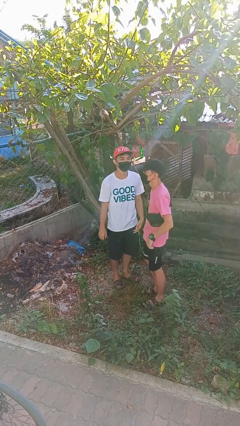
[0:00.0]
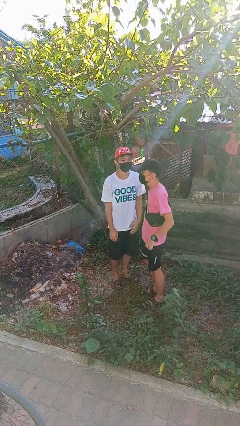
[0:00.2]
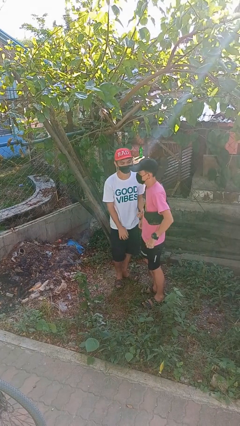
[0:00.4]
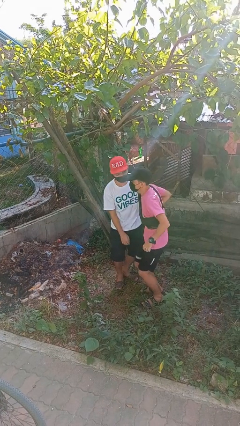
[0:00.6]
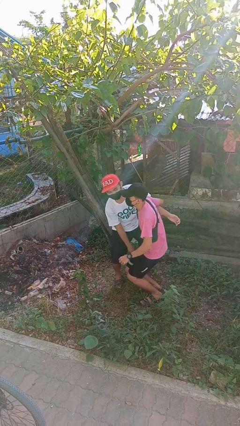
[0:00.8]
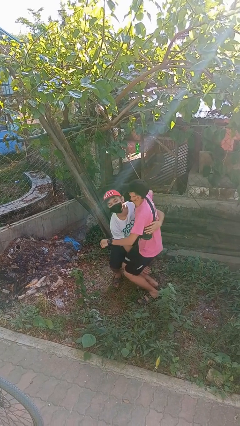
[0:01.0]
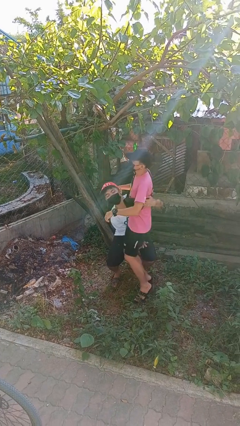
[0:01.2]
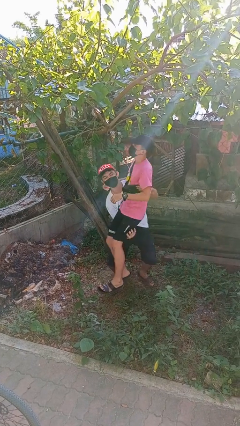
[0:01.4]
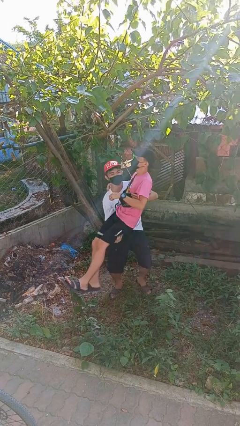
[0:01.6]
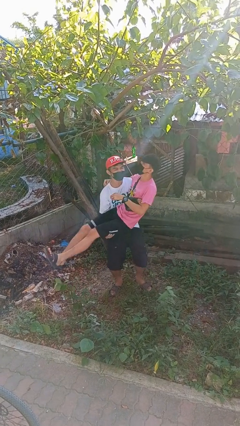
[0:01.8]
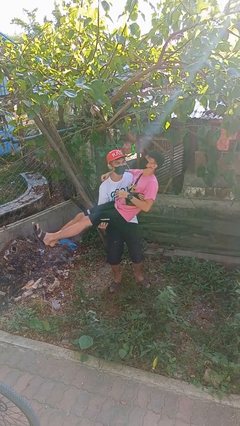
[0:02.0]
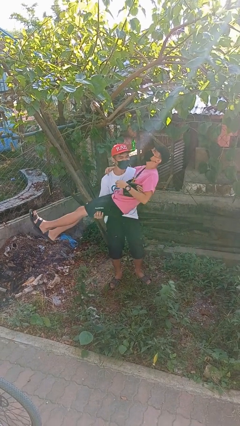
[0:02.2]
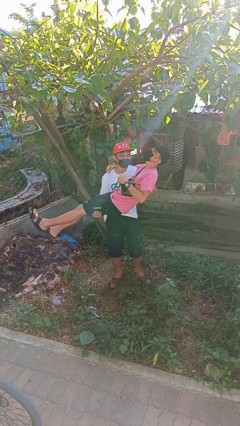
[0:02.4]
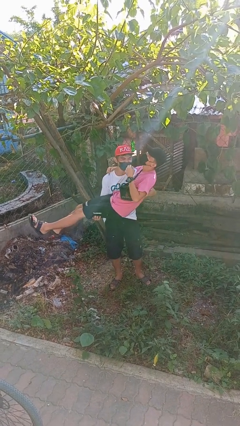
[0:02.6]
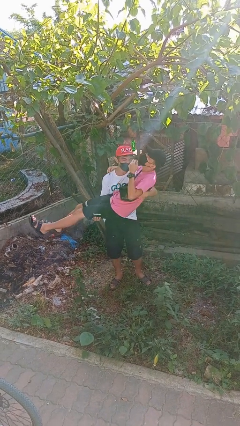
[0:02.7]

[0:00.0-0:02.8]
person picks up person

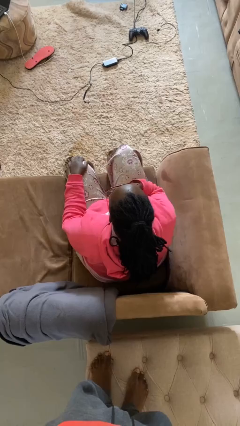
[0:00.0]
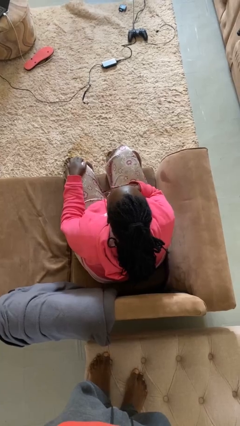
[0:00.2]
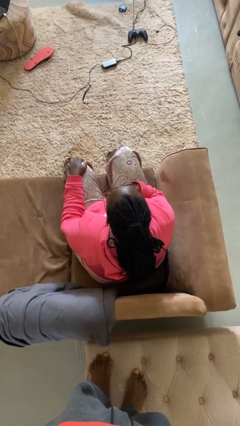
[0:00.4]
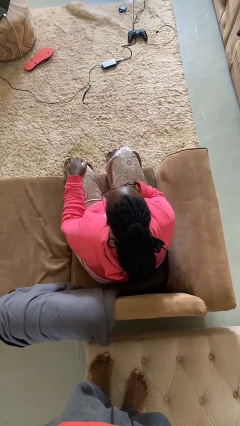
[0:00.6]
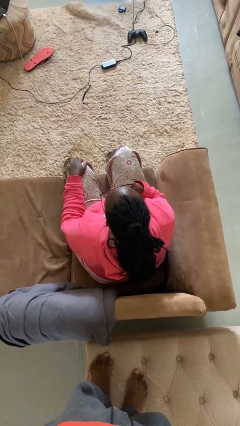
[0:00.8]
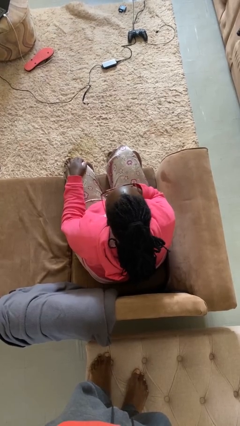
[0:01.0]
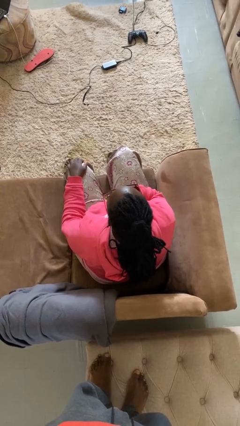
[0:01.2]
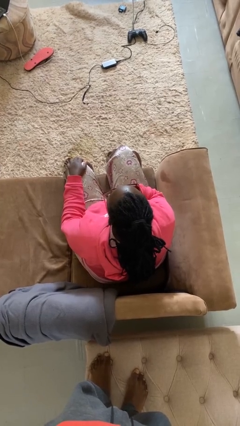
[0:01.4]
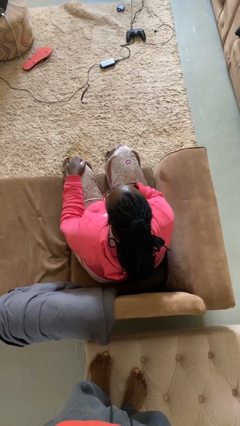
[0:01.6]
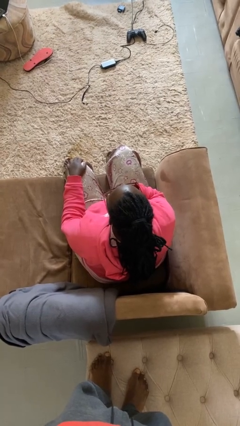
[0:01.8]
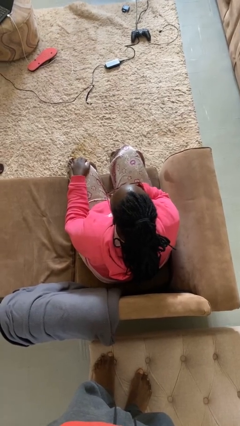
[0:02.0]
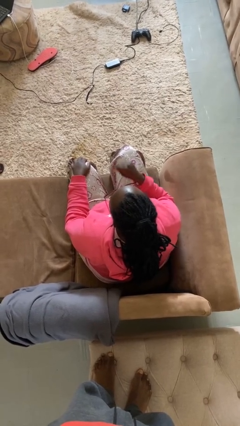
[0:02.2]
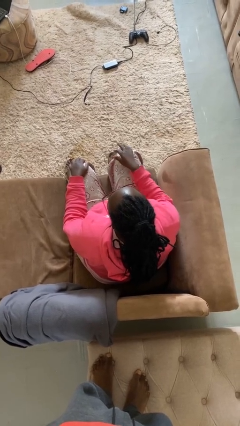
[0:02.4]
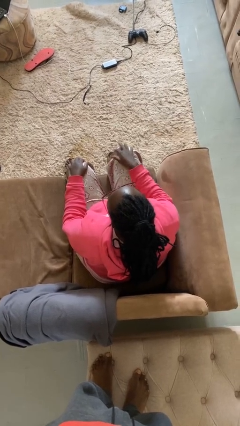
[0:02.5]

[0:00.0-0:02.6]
person strokes chin

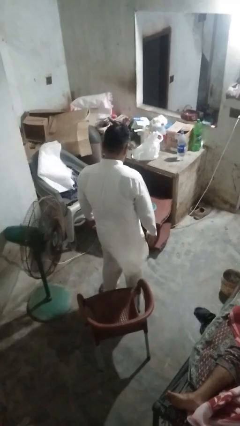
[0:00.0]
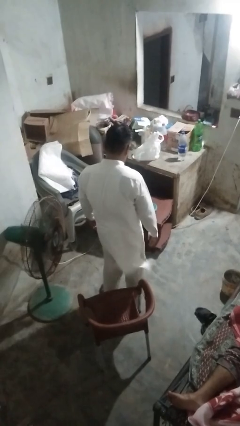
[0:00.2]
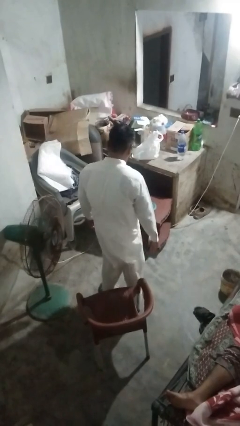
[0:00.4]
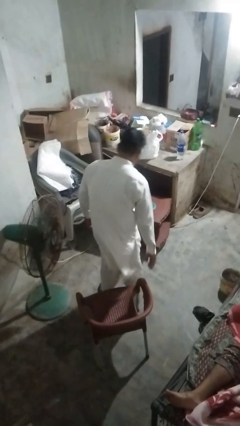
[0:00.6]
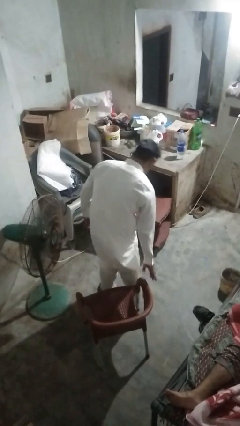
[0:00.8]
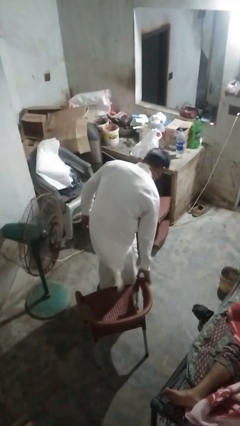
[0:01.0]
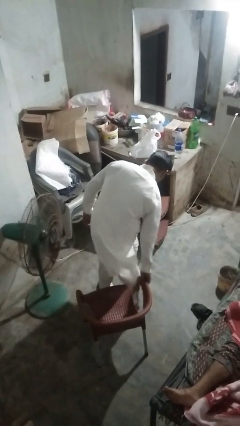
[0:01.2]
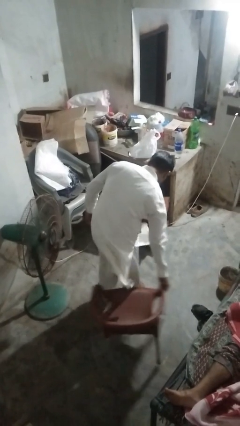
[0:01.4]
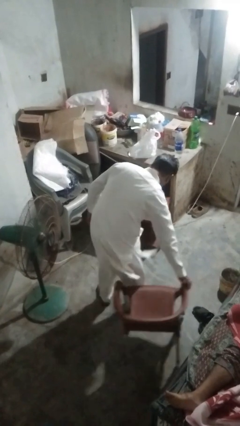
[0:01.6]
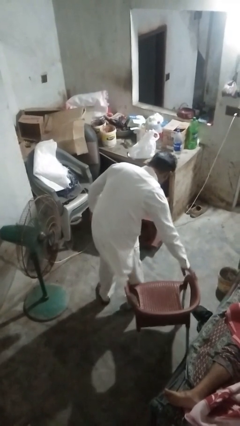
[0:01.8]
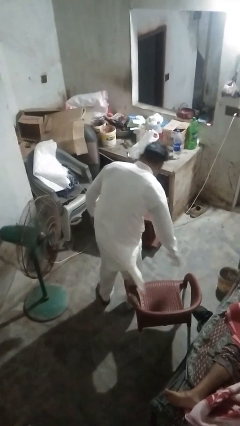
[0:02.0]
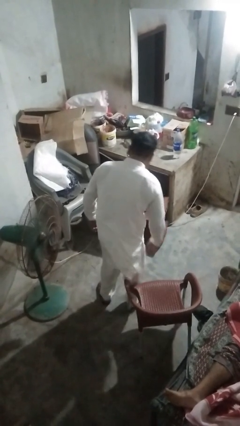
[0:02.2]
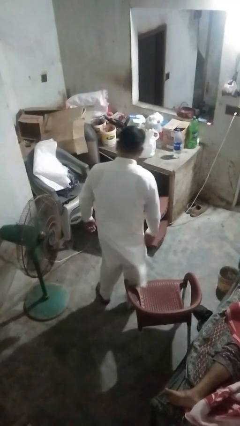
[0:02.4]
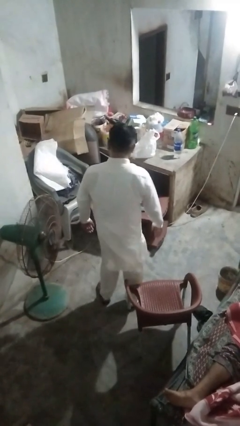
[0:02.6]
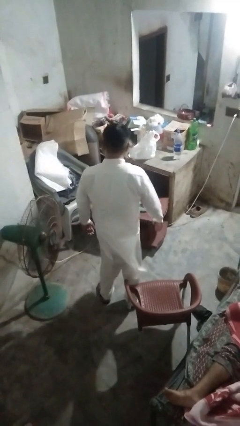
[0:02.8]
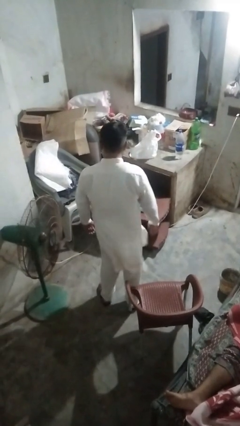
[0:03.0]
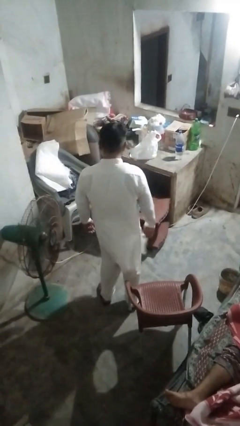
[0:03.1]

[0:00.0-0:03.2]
person pushes in chair

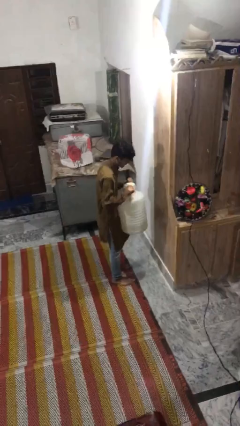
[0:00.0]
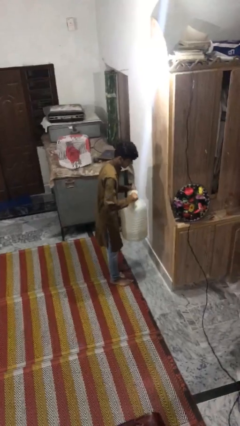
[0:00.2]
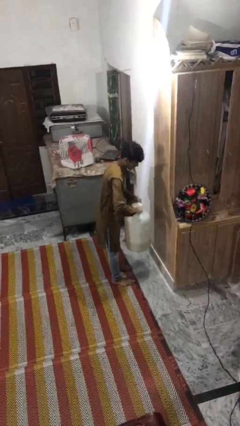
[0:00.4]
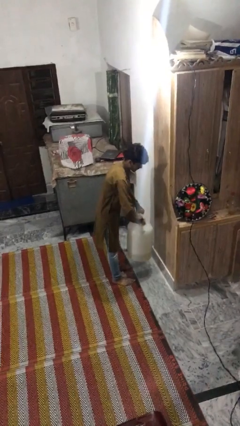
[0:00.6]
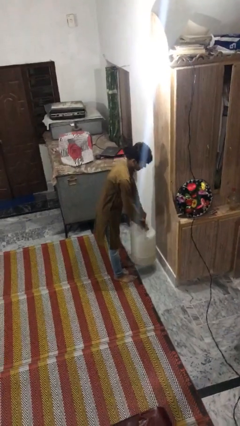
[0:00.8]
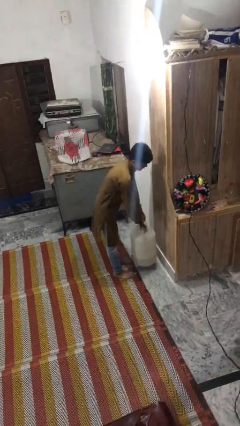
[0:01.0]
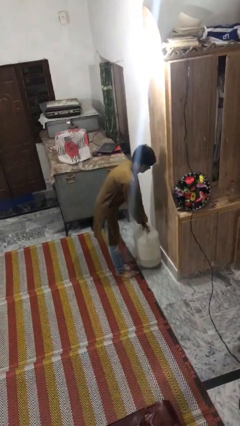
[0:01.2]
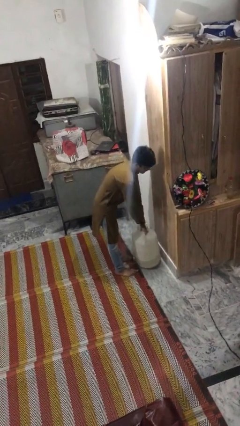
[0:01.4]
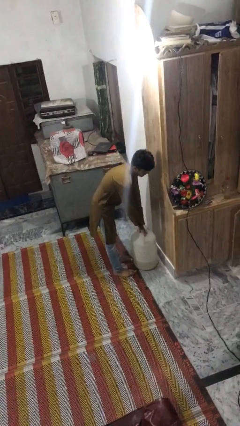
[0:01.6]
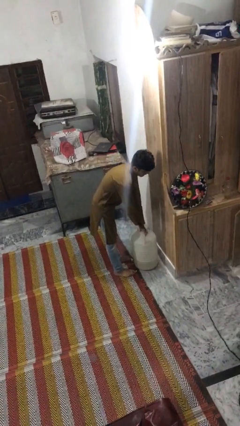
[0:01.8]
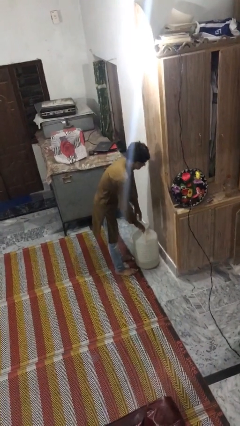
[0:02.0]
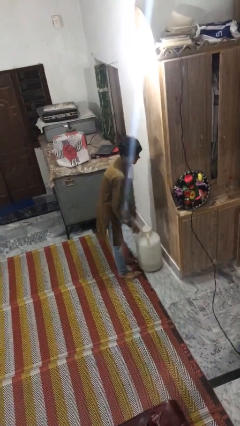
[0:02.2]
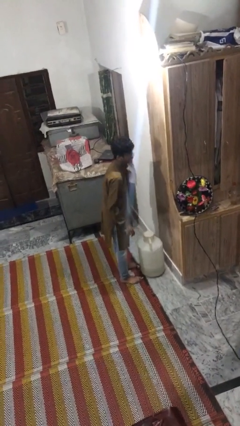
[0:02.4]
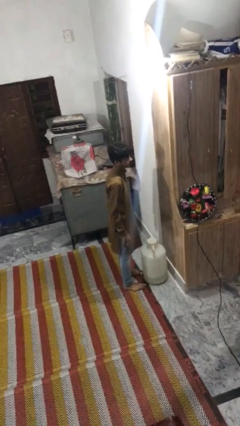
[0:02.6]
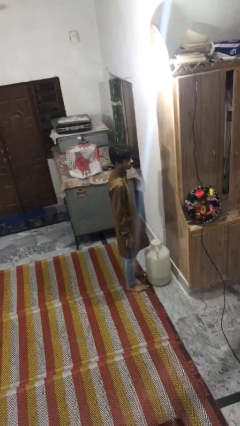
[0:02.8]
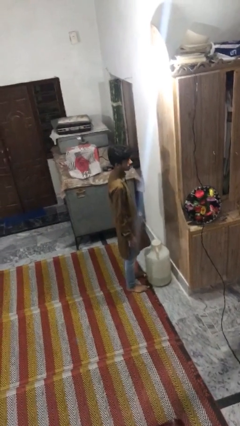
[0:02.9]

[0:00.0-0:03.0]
person puts down object on floor

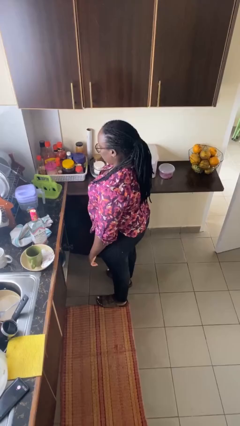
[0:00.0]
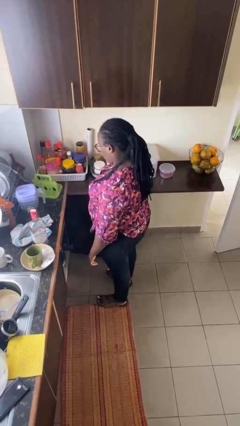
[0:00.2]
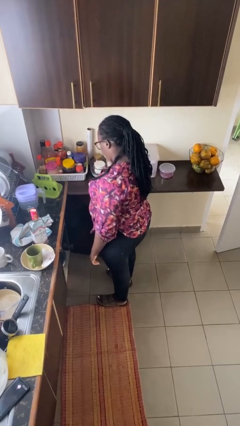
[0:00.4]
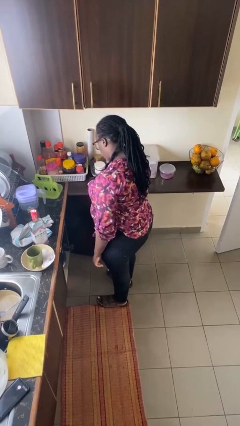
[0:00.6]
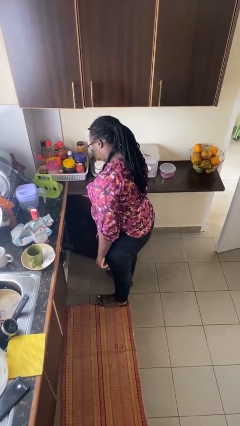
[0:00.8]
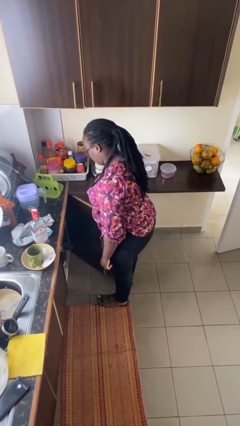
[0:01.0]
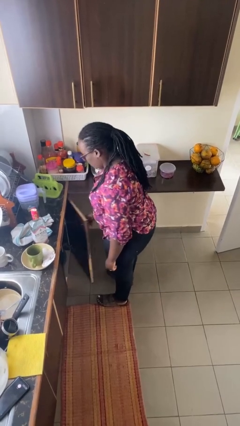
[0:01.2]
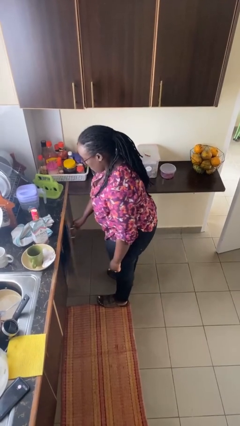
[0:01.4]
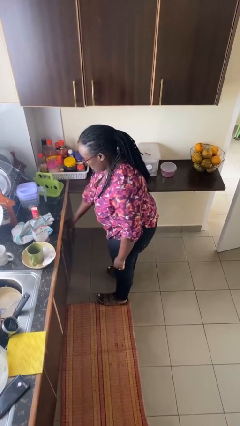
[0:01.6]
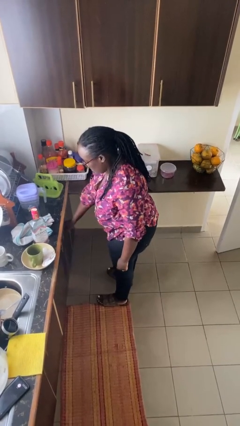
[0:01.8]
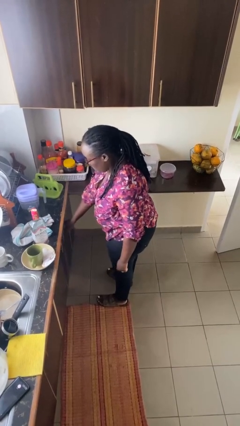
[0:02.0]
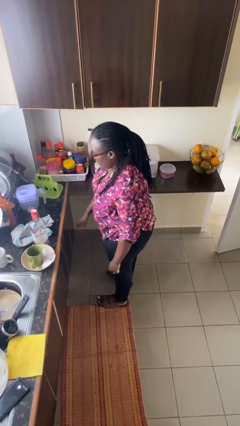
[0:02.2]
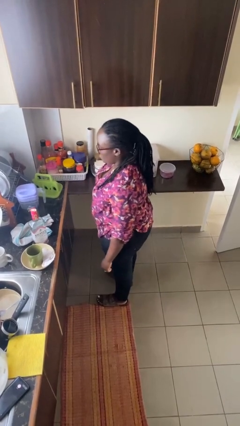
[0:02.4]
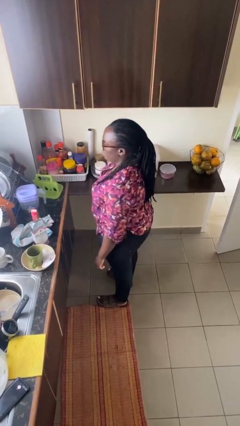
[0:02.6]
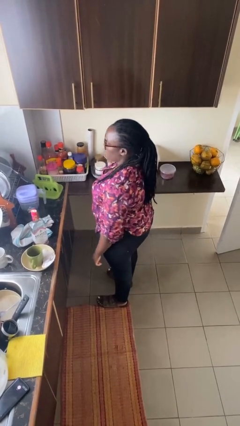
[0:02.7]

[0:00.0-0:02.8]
person closes cabinet

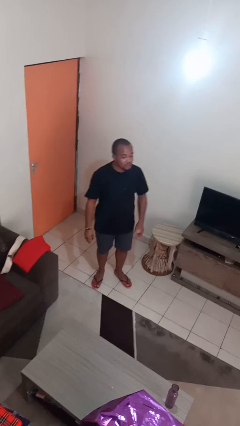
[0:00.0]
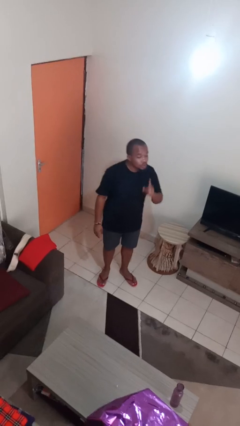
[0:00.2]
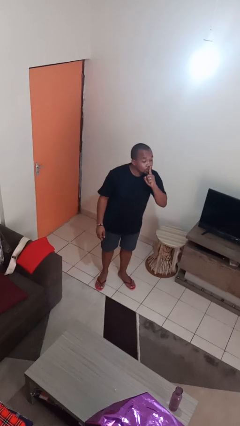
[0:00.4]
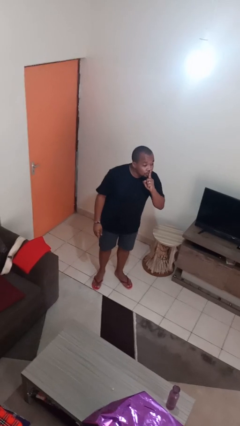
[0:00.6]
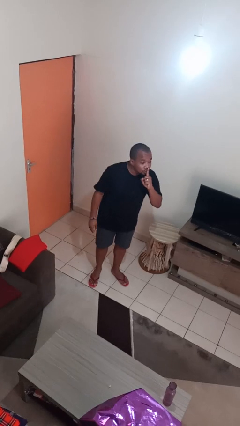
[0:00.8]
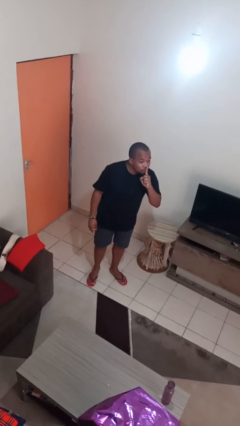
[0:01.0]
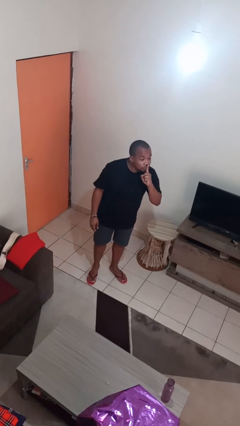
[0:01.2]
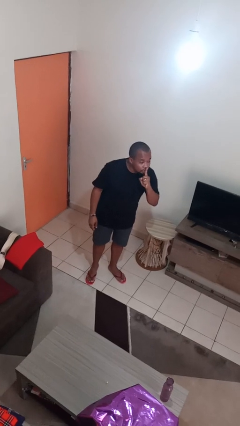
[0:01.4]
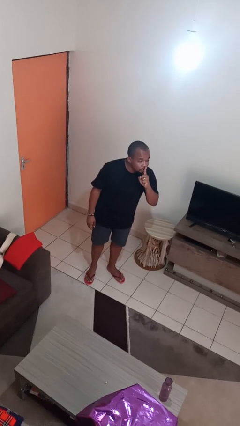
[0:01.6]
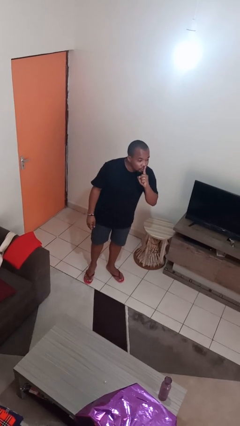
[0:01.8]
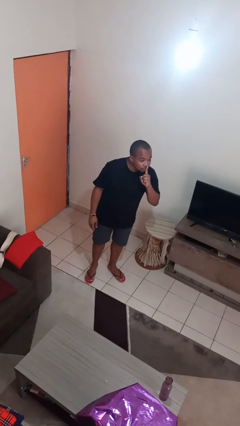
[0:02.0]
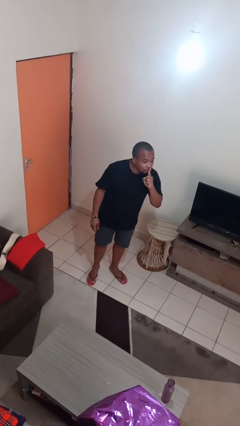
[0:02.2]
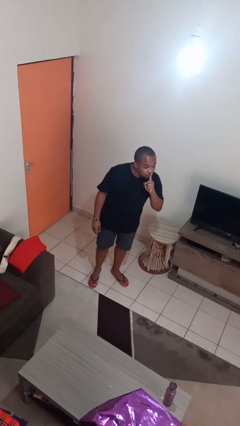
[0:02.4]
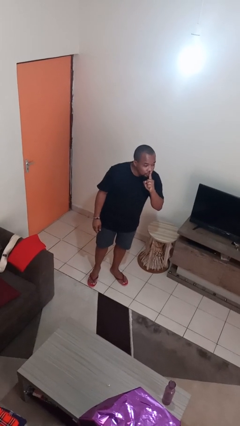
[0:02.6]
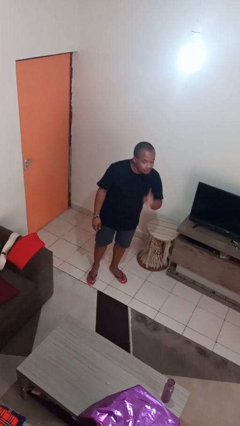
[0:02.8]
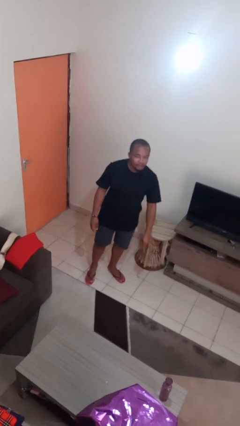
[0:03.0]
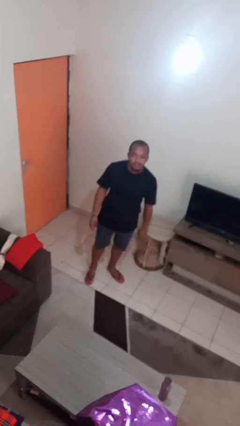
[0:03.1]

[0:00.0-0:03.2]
person gestures be quiet

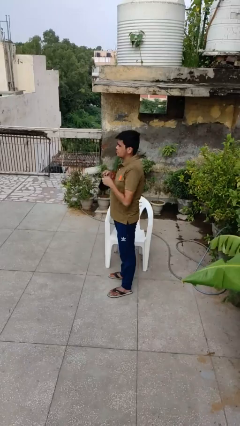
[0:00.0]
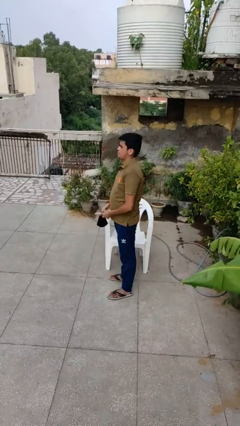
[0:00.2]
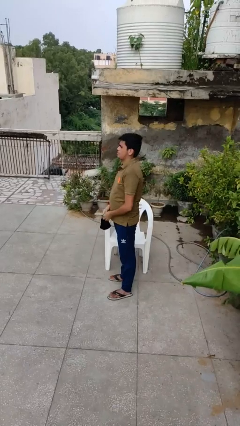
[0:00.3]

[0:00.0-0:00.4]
person takes off facemask
